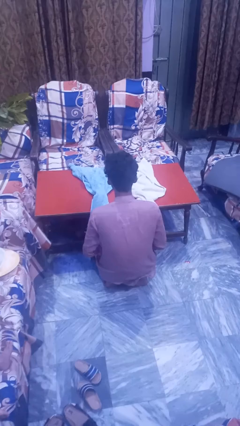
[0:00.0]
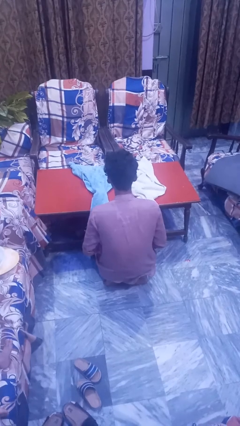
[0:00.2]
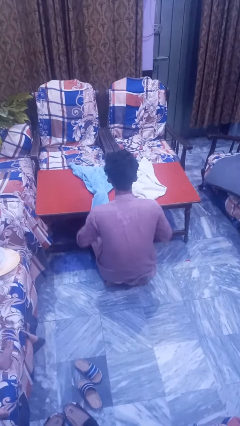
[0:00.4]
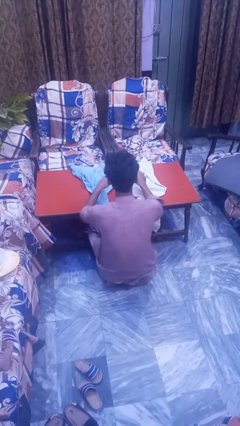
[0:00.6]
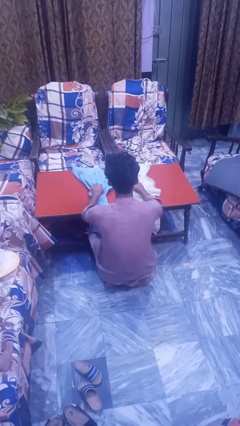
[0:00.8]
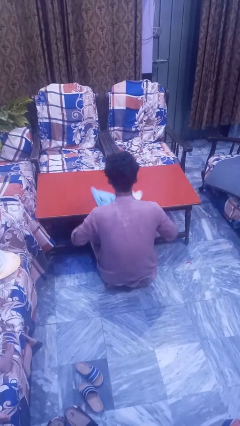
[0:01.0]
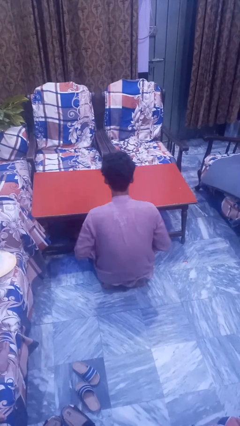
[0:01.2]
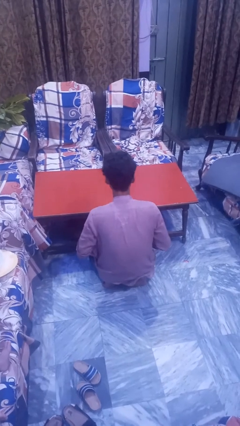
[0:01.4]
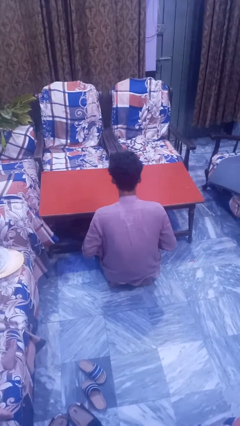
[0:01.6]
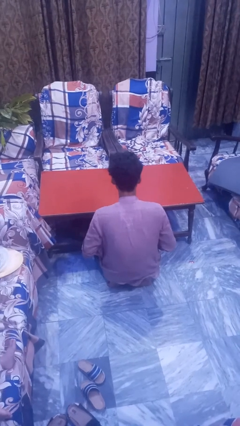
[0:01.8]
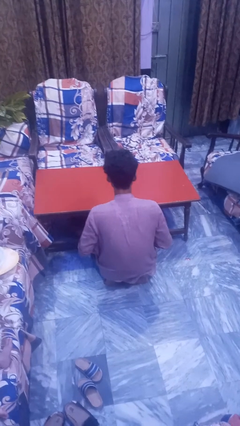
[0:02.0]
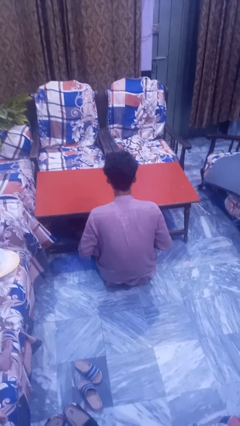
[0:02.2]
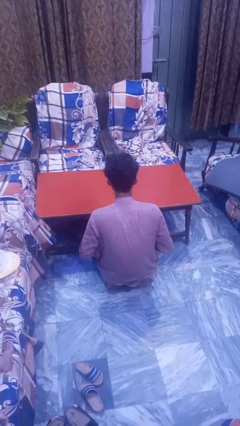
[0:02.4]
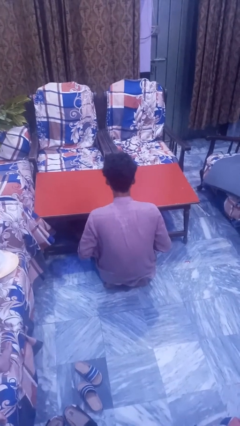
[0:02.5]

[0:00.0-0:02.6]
person folds tablecloth

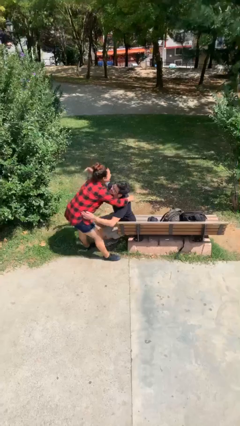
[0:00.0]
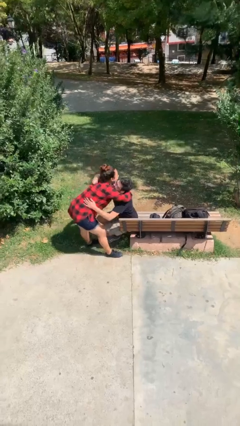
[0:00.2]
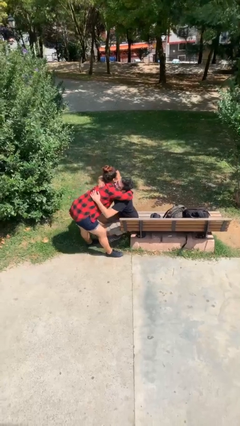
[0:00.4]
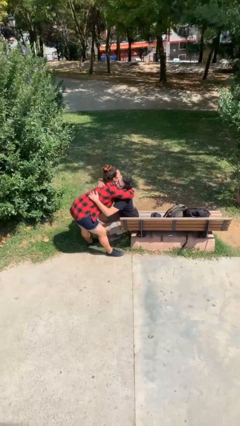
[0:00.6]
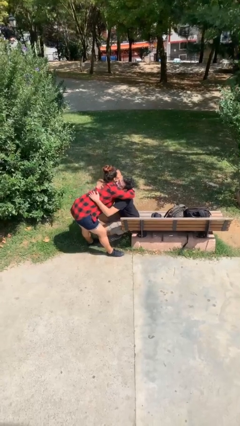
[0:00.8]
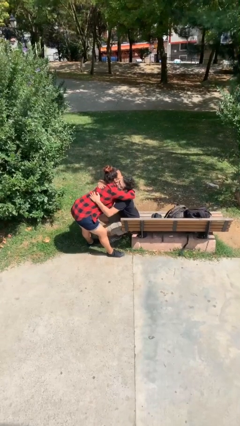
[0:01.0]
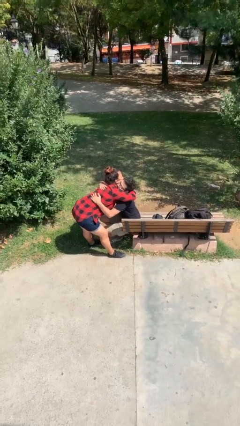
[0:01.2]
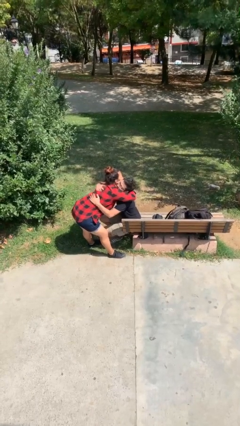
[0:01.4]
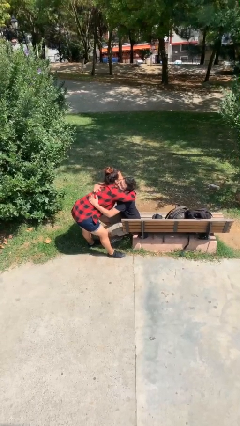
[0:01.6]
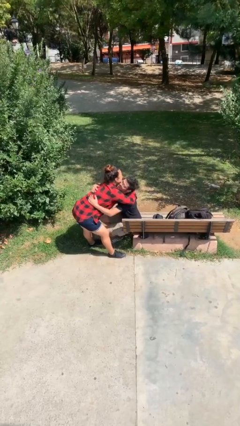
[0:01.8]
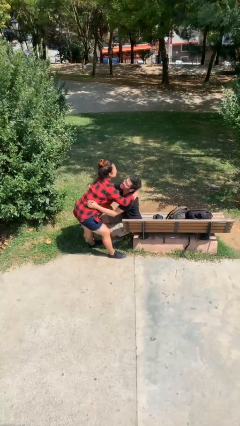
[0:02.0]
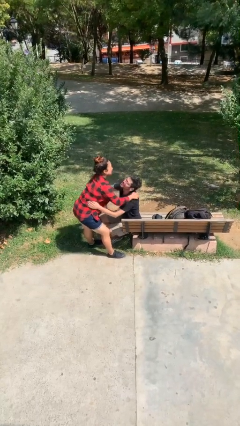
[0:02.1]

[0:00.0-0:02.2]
person embraces person

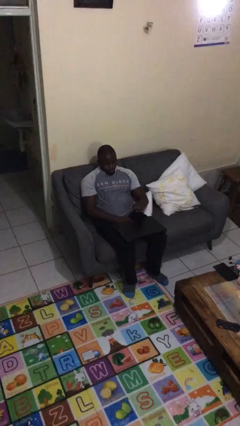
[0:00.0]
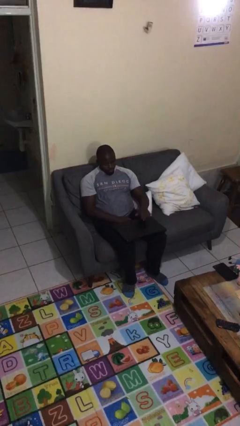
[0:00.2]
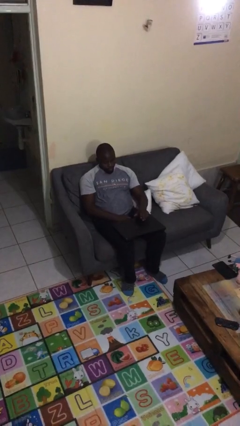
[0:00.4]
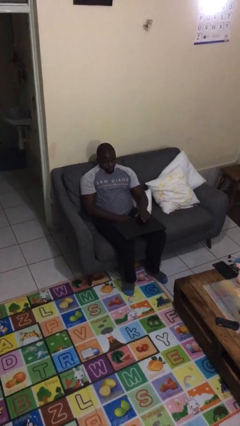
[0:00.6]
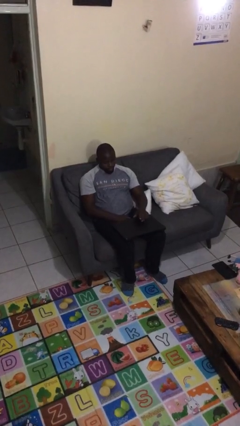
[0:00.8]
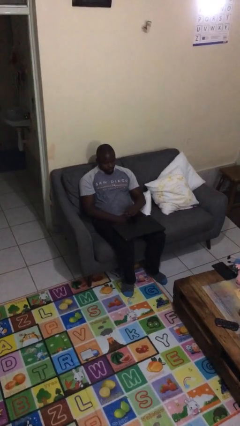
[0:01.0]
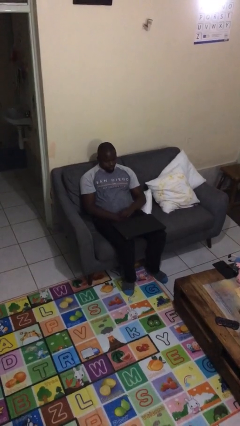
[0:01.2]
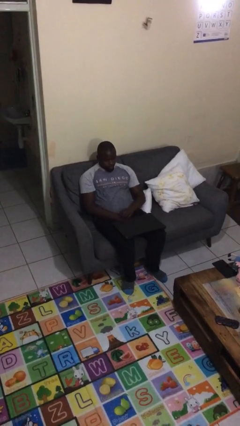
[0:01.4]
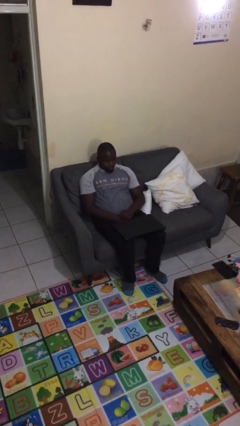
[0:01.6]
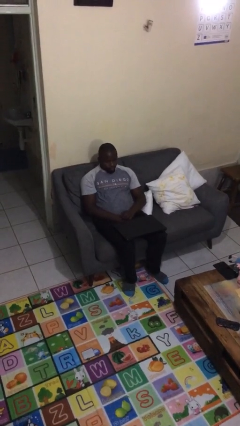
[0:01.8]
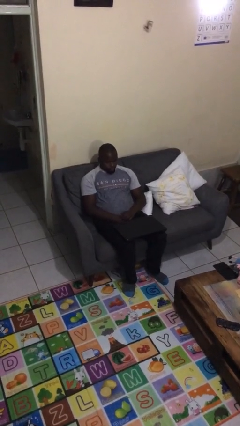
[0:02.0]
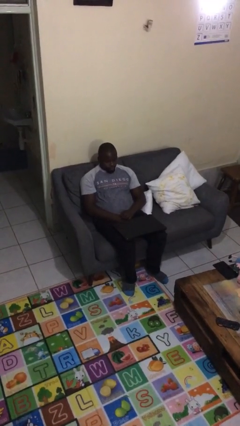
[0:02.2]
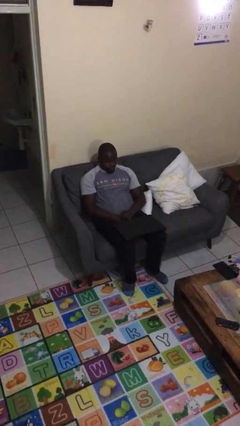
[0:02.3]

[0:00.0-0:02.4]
person taps object with finger

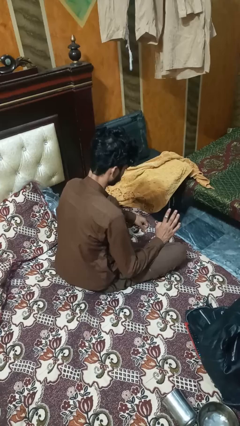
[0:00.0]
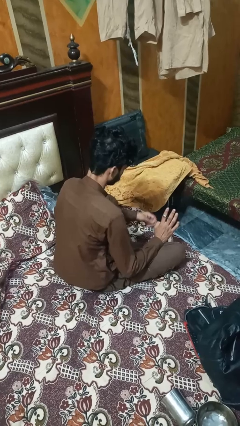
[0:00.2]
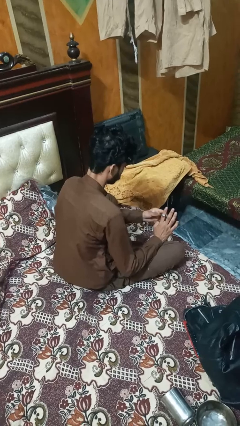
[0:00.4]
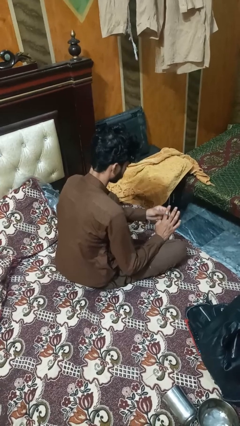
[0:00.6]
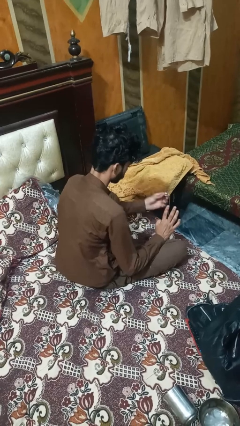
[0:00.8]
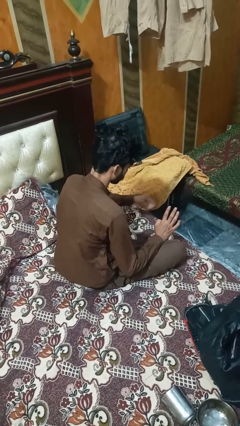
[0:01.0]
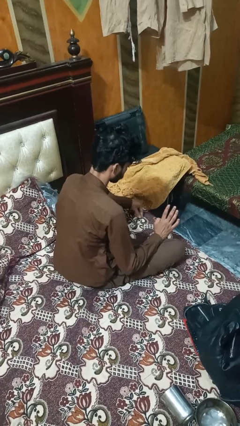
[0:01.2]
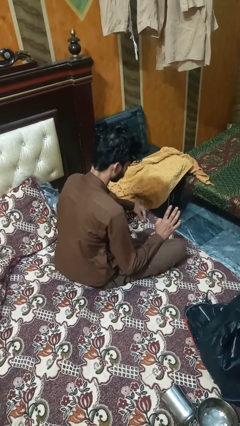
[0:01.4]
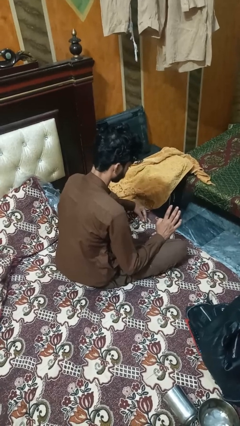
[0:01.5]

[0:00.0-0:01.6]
person takes off ring

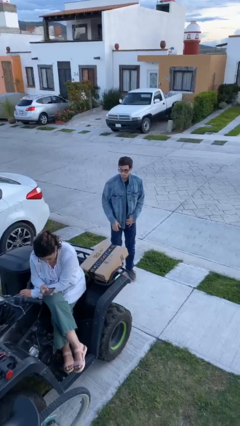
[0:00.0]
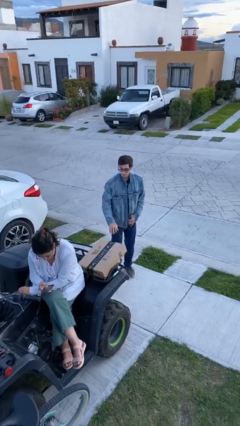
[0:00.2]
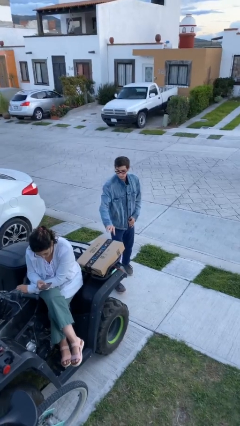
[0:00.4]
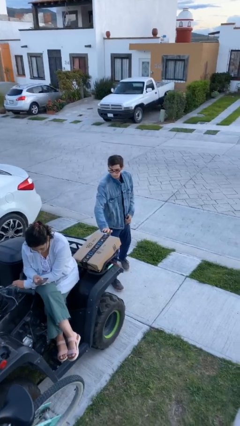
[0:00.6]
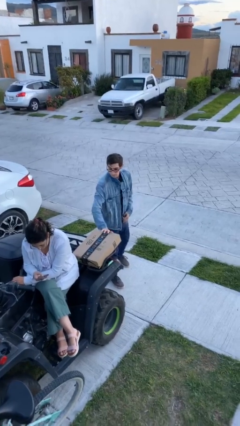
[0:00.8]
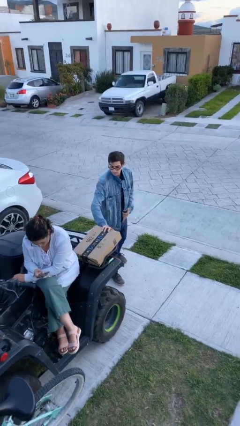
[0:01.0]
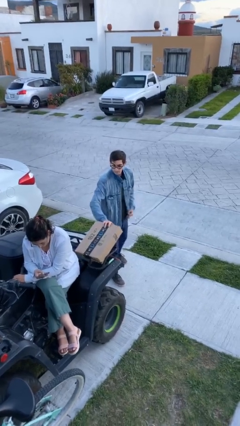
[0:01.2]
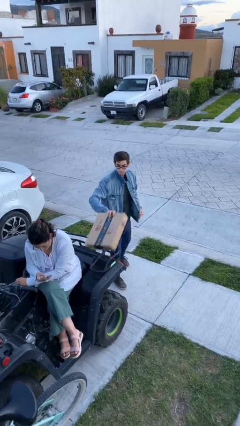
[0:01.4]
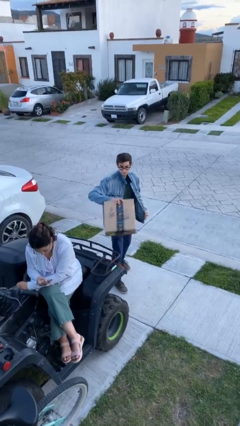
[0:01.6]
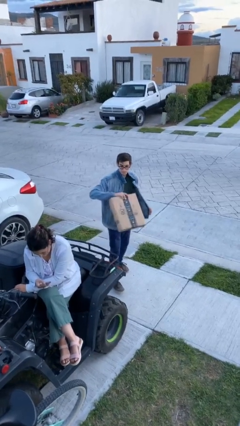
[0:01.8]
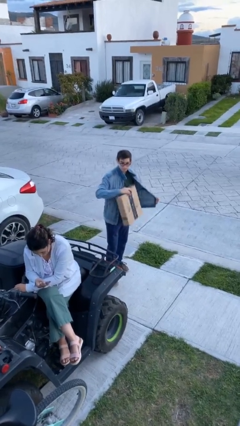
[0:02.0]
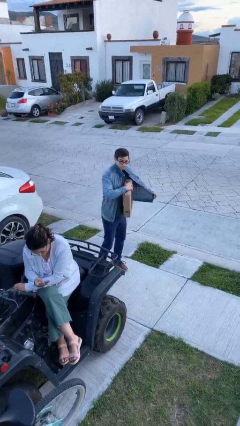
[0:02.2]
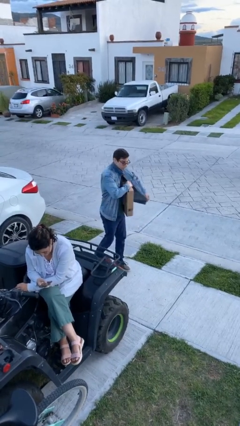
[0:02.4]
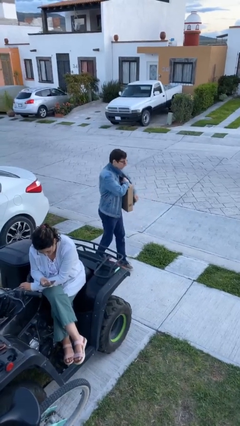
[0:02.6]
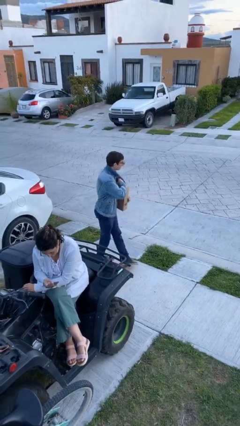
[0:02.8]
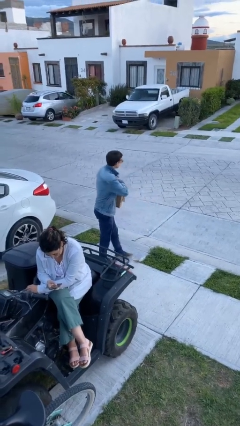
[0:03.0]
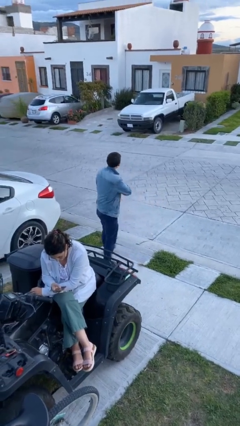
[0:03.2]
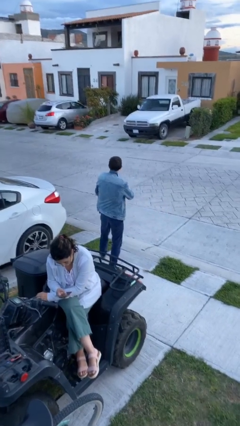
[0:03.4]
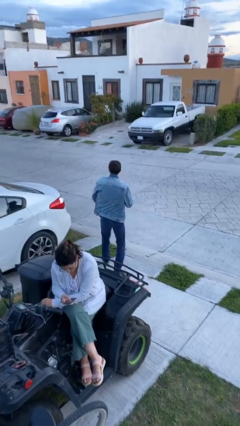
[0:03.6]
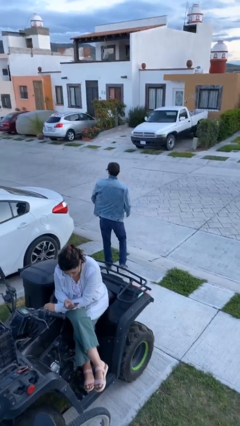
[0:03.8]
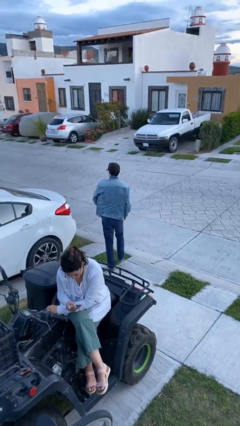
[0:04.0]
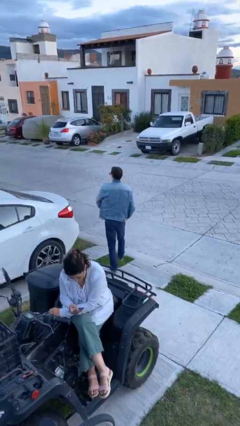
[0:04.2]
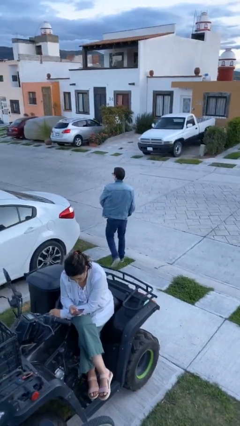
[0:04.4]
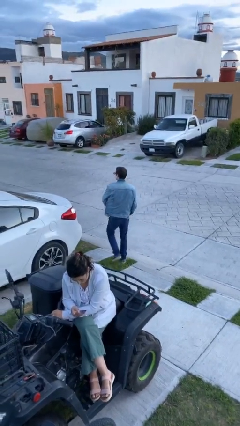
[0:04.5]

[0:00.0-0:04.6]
person steals object from person

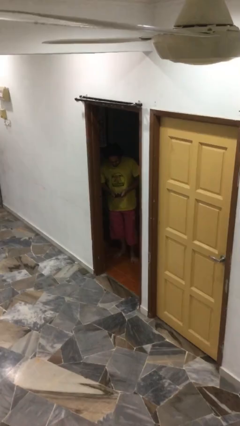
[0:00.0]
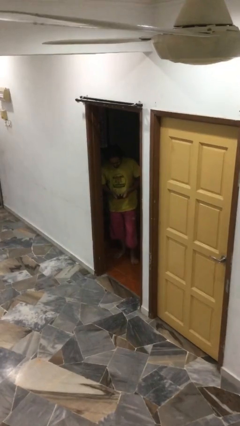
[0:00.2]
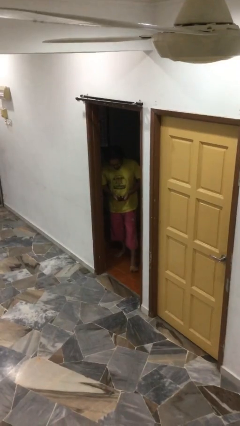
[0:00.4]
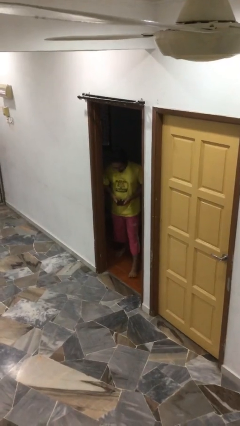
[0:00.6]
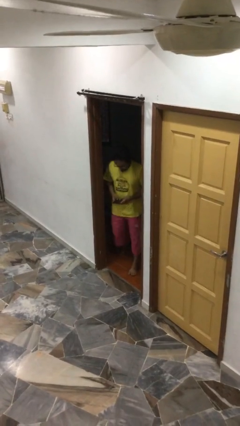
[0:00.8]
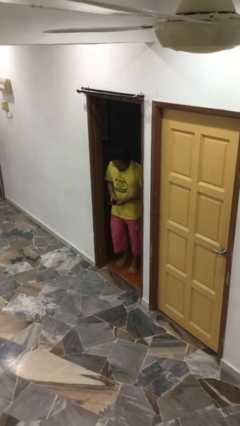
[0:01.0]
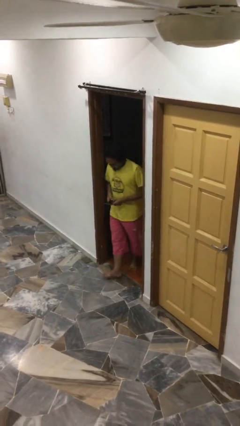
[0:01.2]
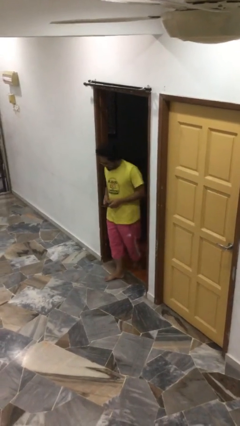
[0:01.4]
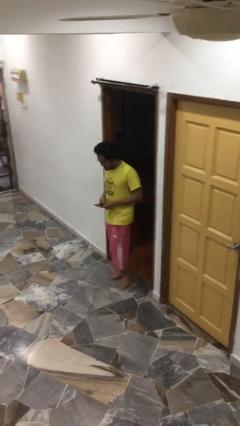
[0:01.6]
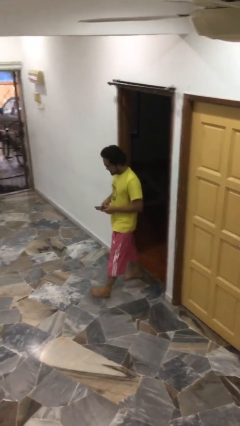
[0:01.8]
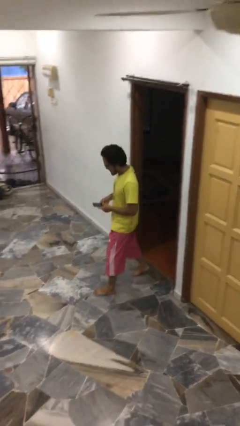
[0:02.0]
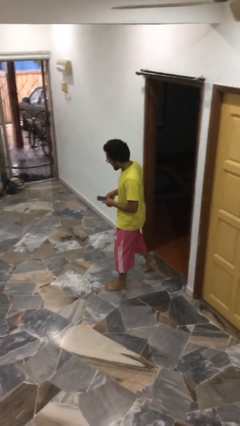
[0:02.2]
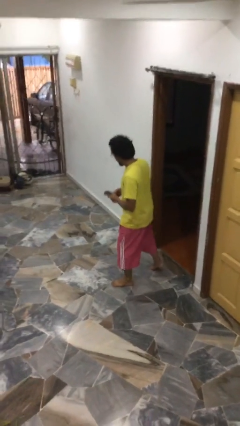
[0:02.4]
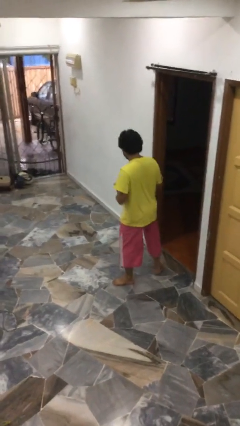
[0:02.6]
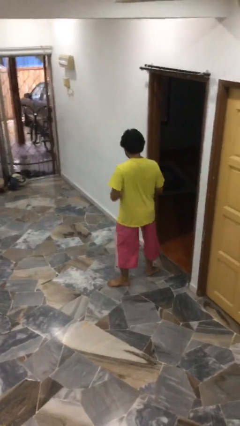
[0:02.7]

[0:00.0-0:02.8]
person enters scene through structure

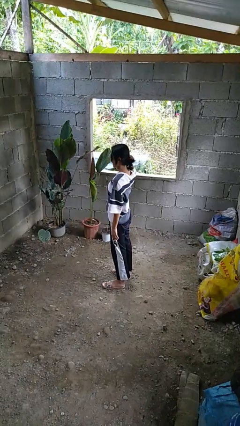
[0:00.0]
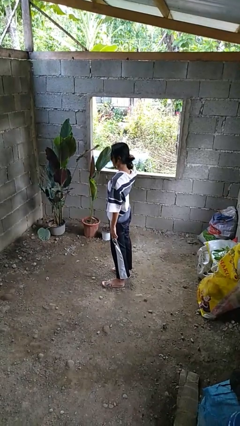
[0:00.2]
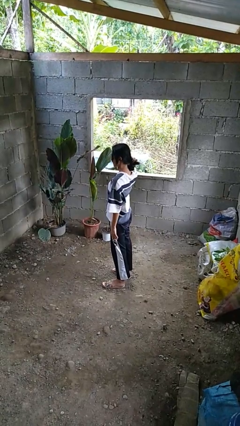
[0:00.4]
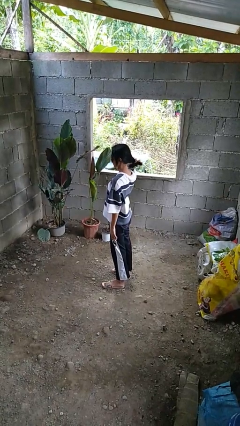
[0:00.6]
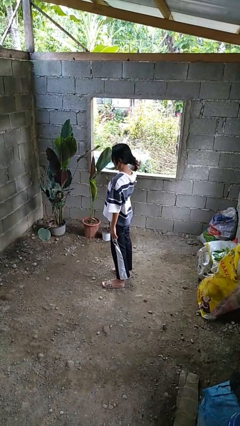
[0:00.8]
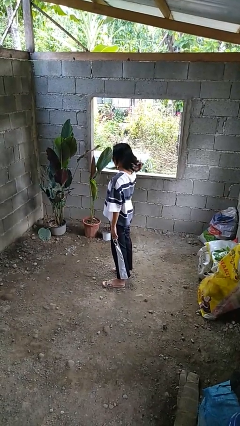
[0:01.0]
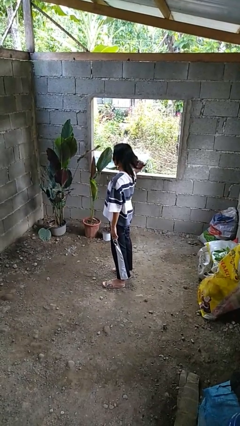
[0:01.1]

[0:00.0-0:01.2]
person takes off hairtie
